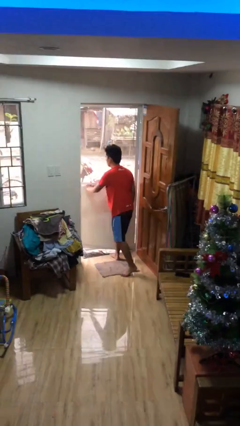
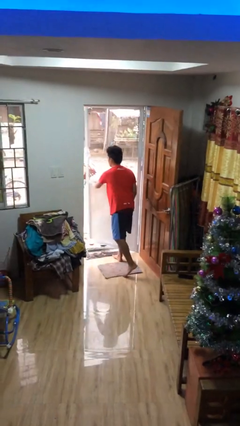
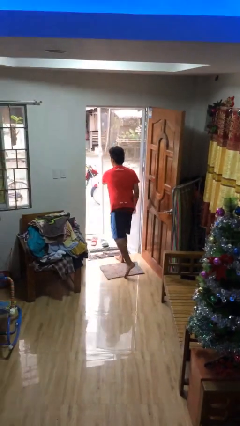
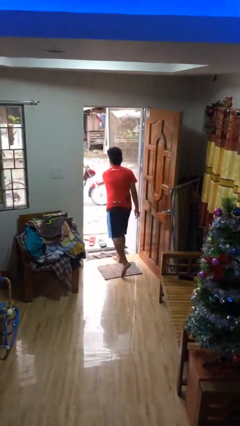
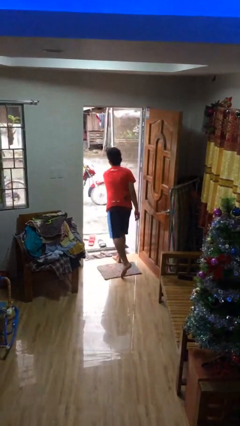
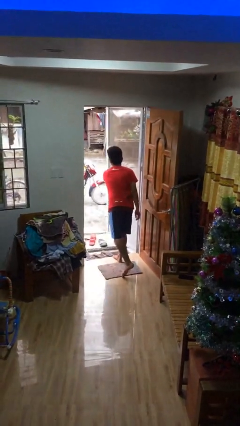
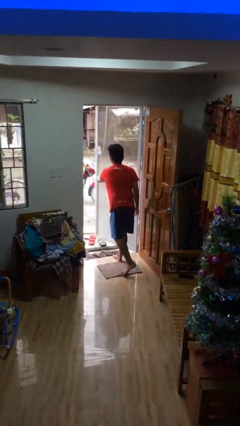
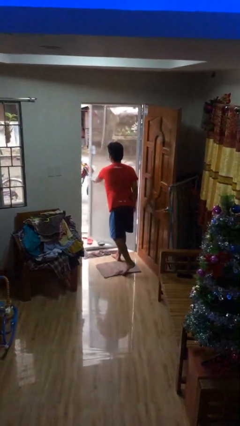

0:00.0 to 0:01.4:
person opens facility door

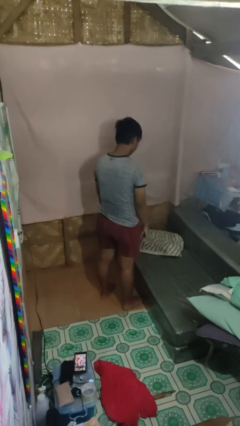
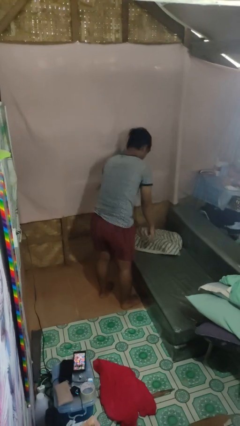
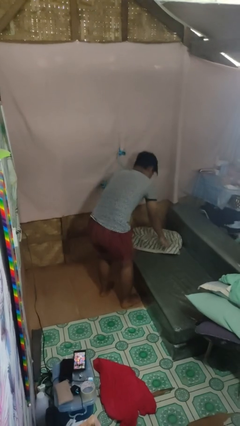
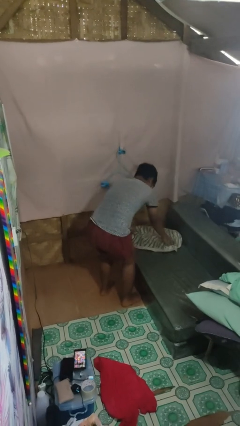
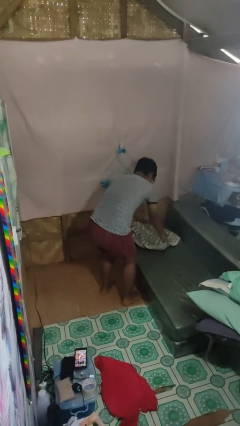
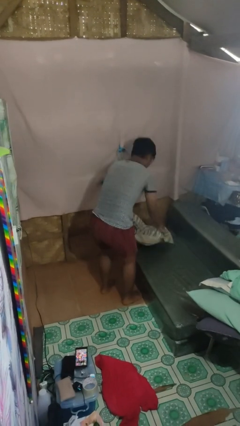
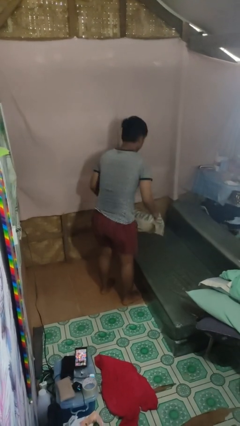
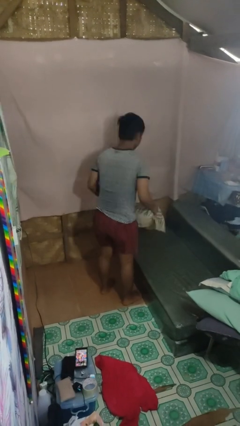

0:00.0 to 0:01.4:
person picks up object from couch

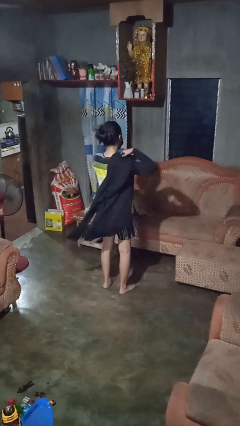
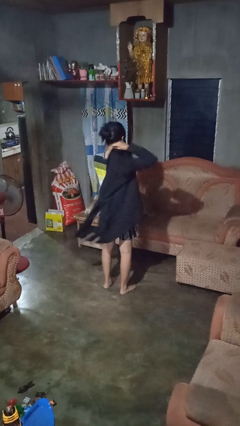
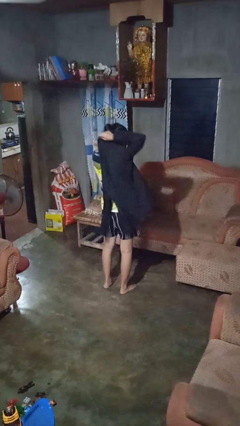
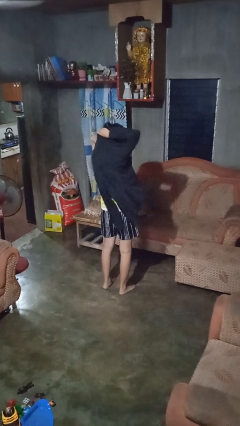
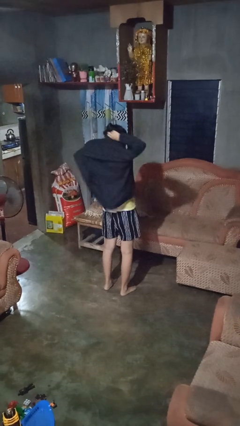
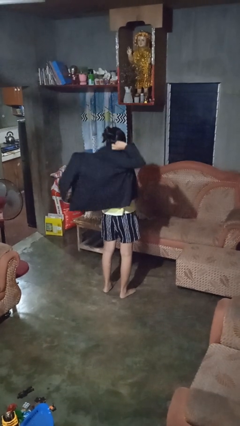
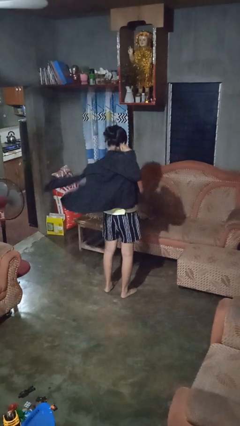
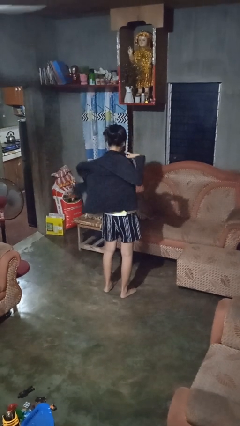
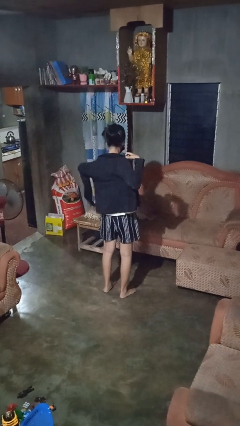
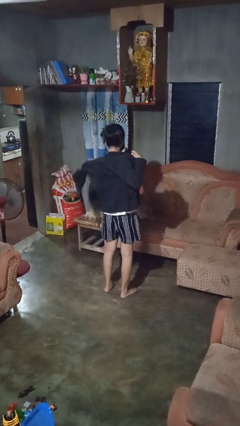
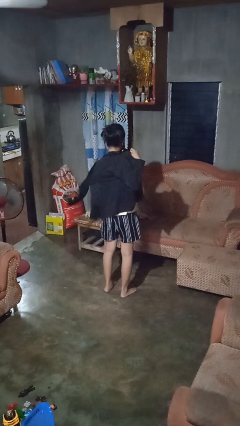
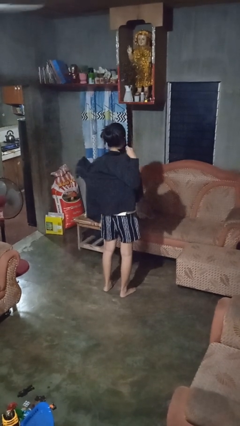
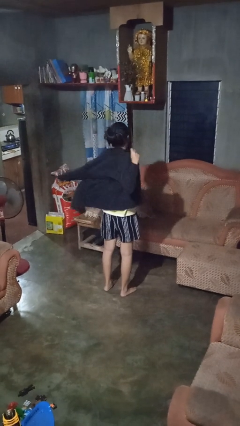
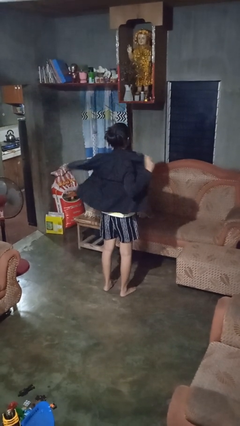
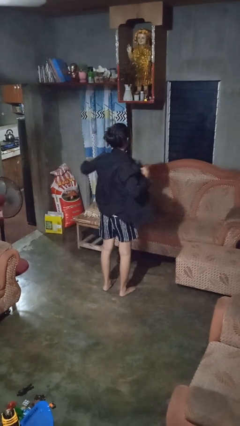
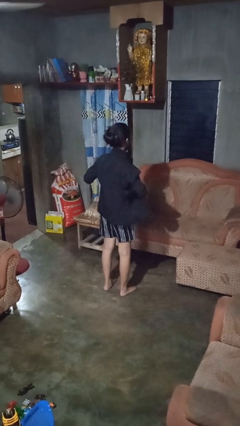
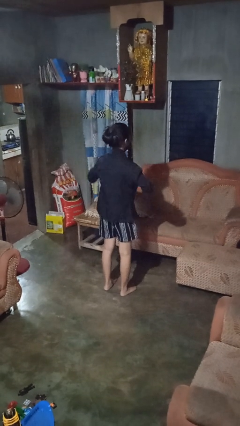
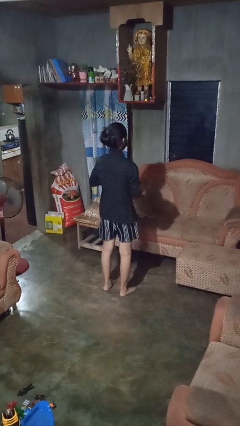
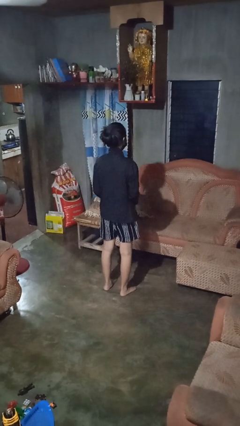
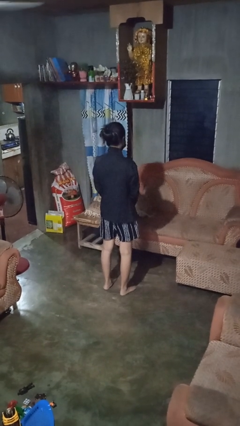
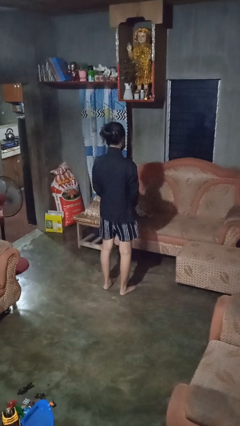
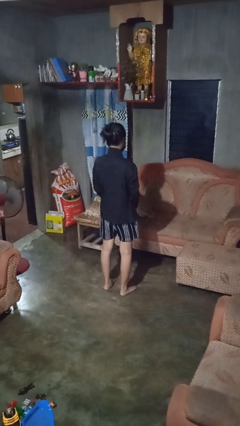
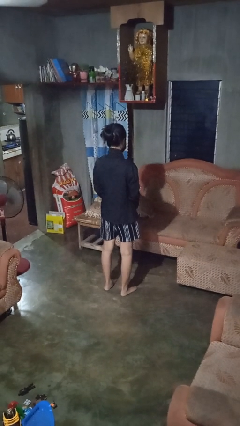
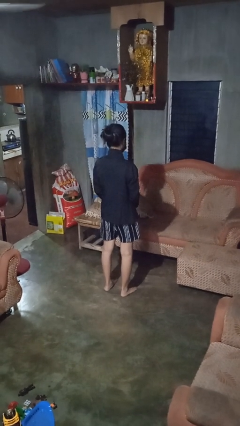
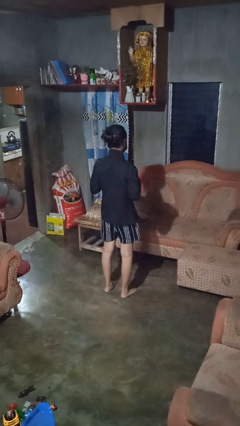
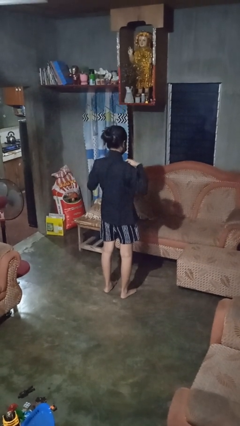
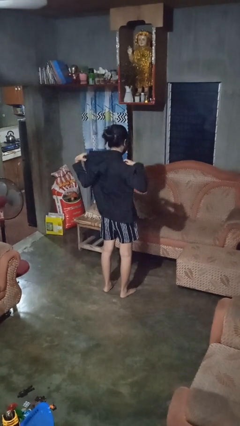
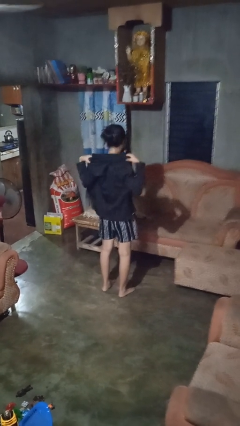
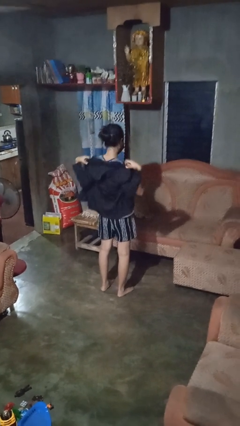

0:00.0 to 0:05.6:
person puts on shirt

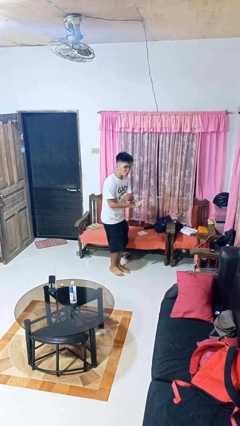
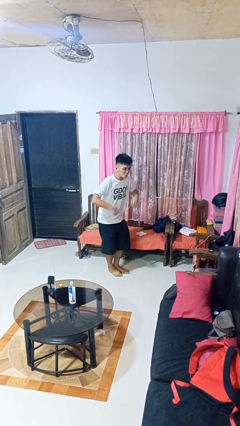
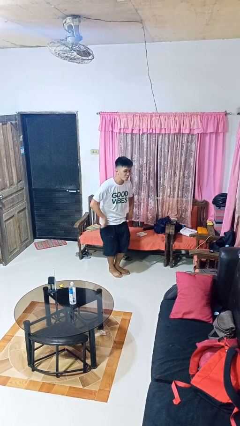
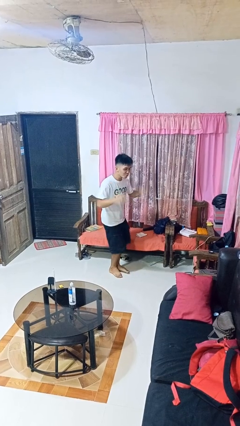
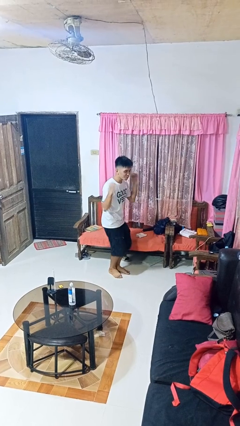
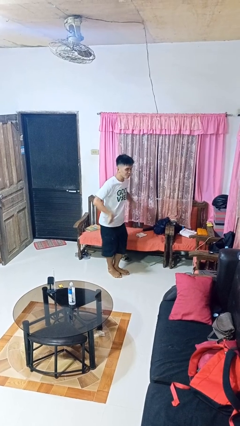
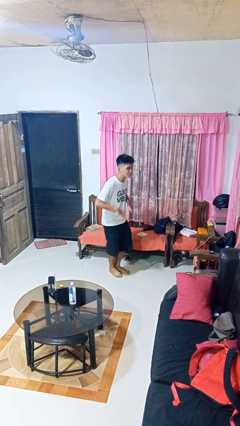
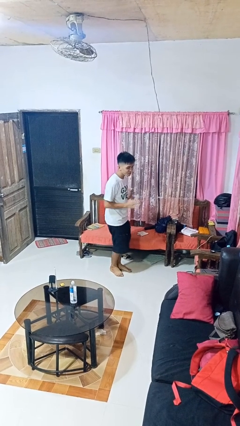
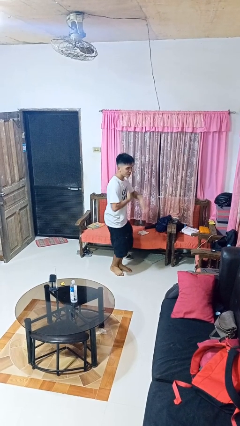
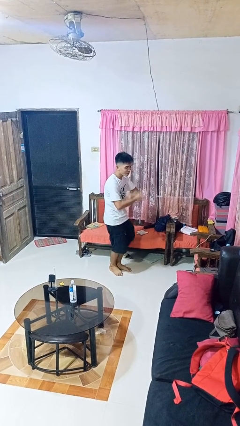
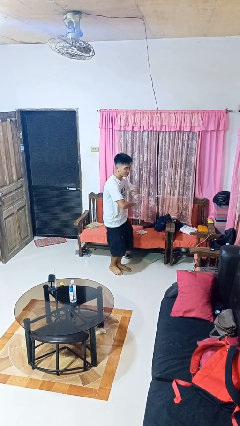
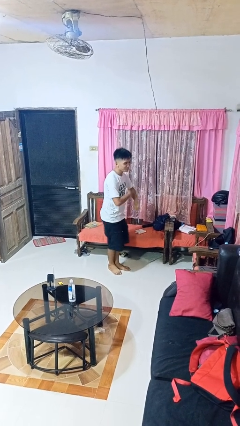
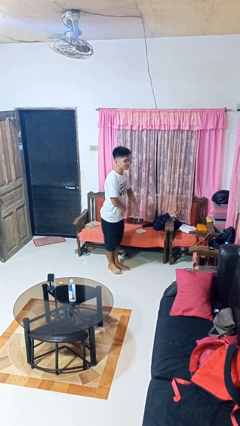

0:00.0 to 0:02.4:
person dances in place

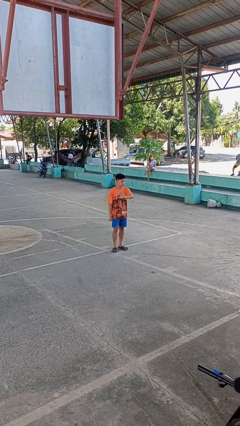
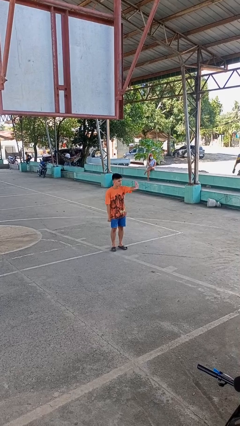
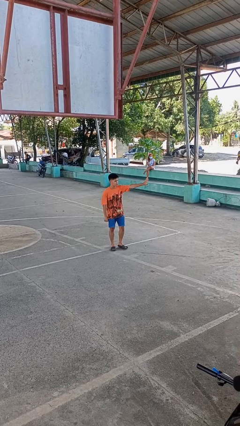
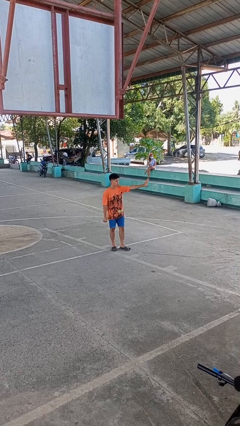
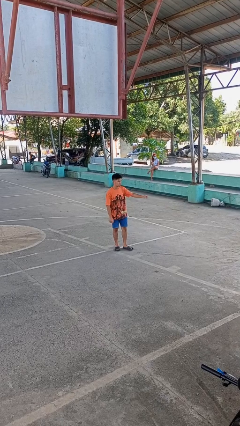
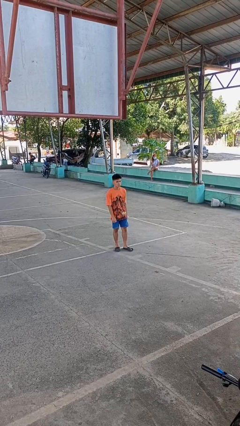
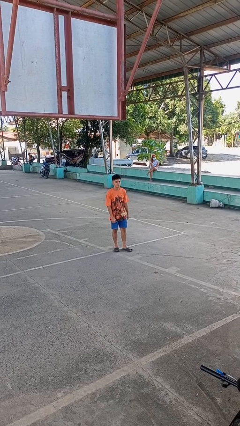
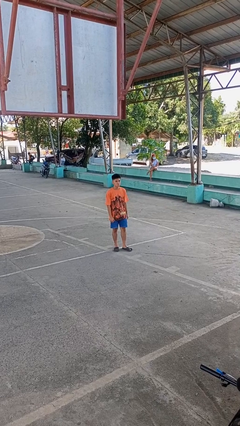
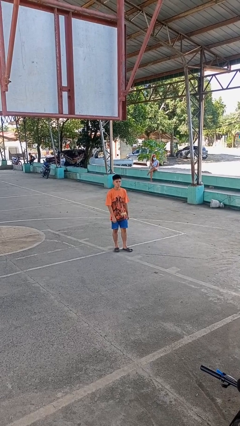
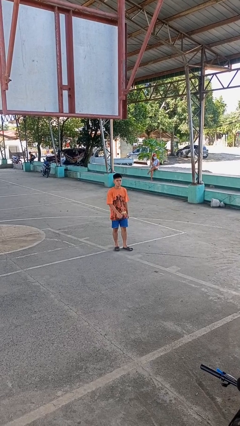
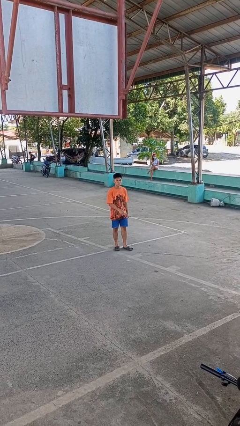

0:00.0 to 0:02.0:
person gestures swipe left

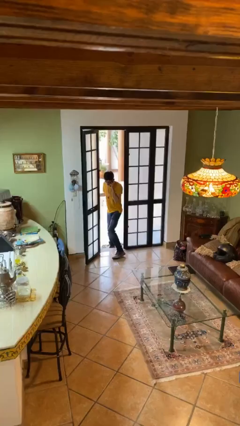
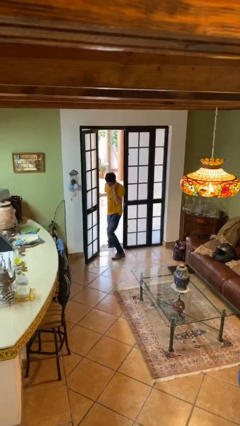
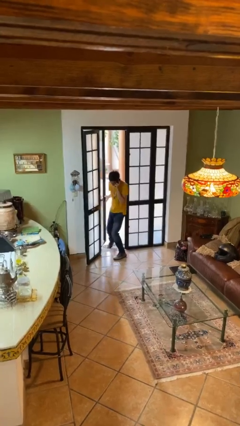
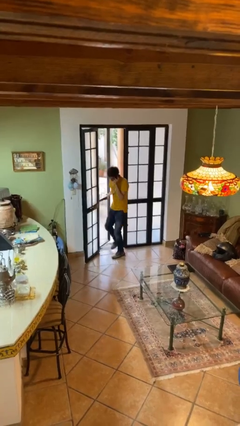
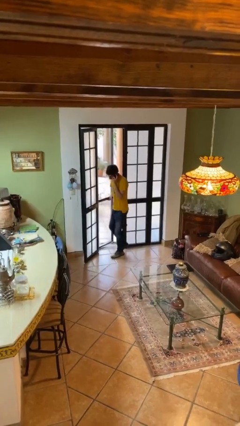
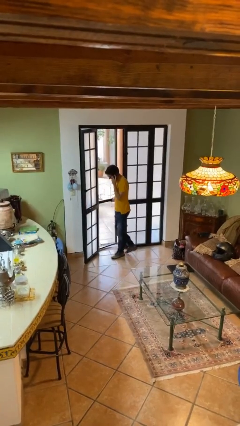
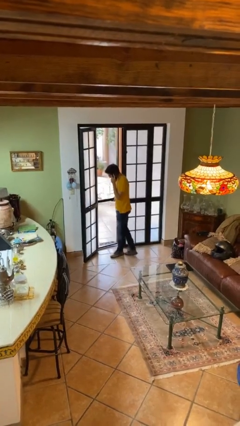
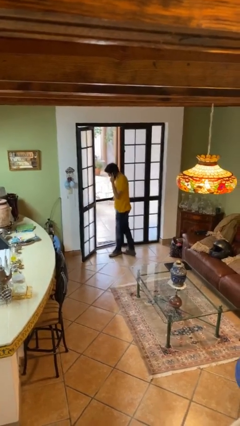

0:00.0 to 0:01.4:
person enters scene through structure

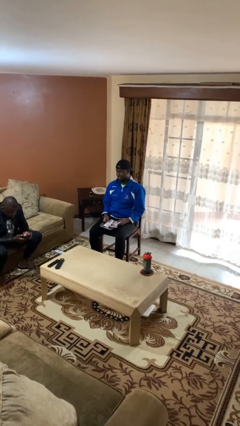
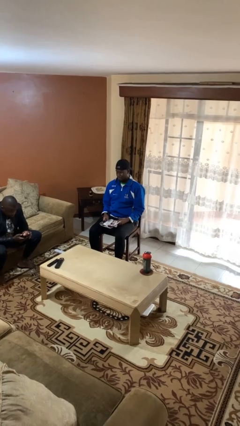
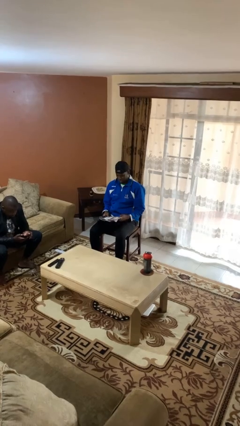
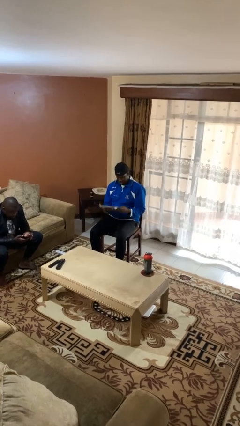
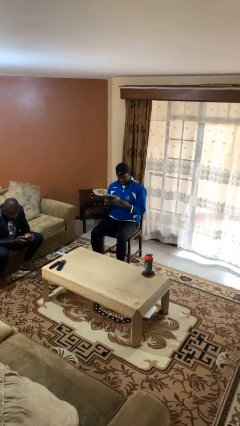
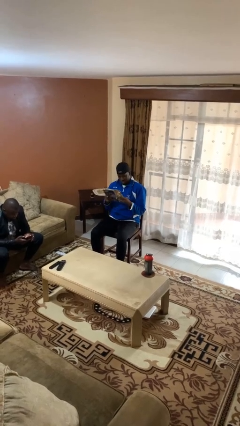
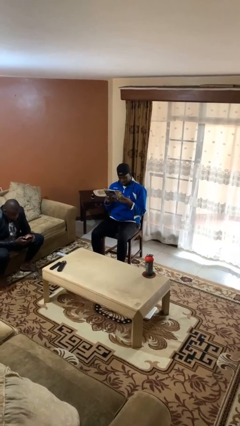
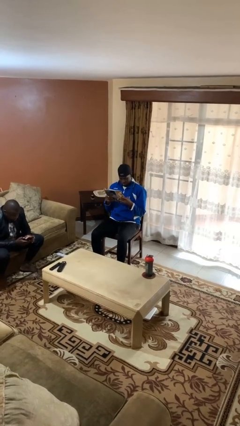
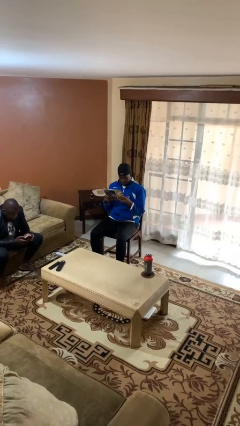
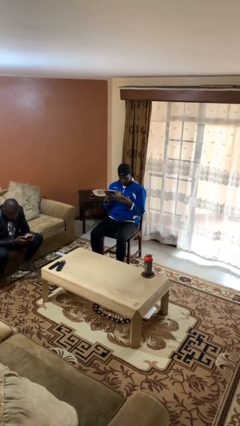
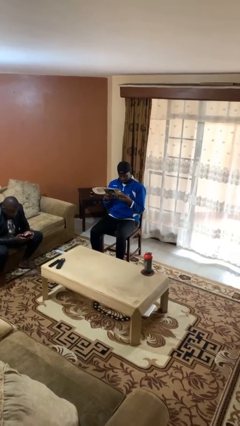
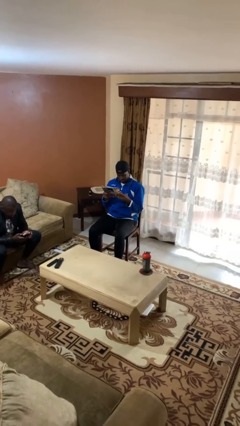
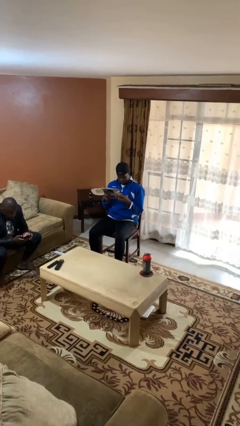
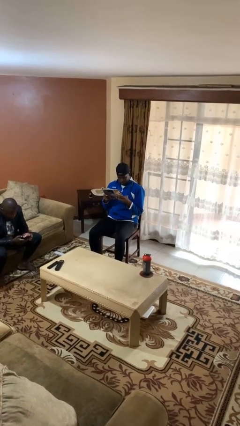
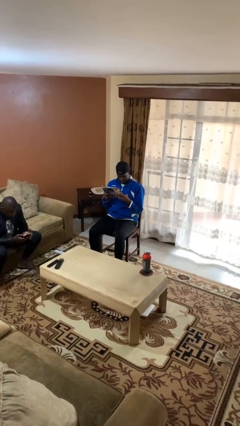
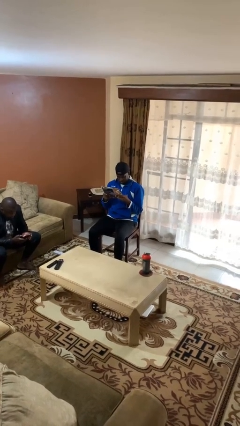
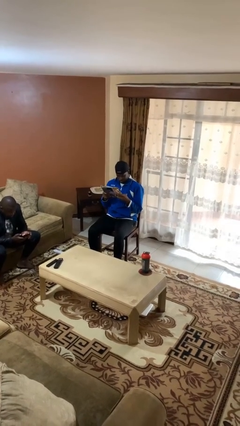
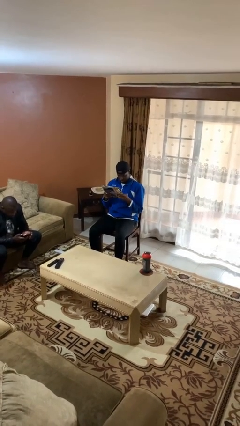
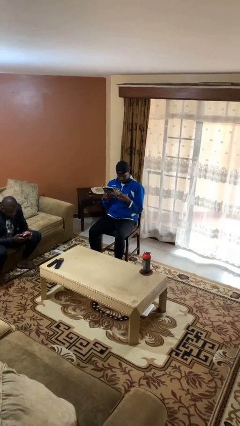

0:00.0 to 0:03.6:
person reads document
